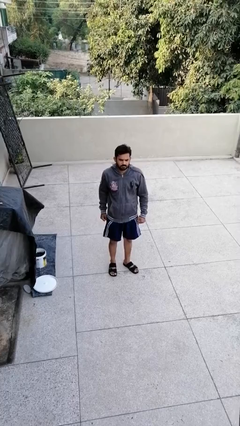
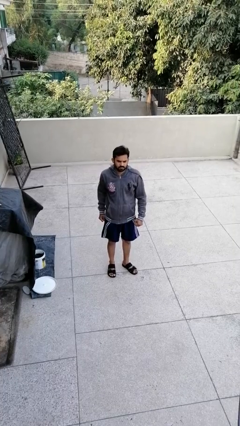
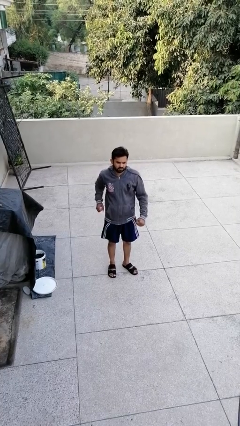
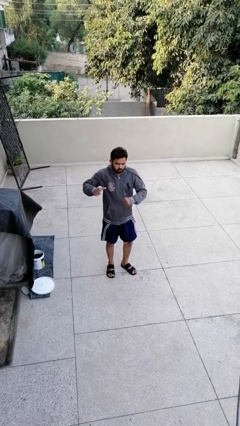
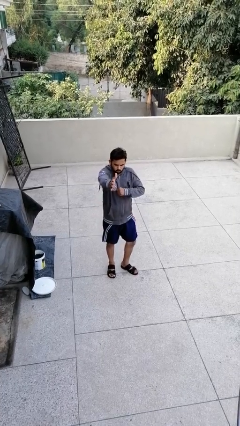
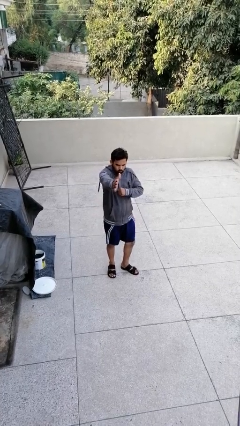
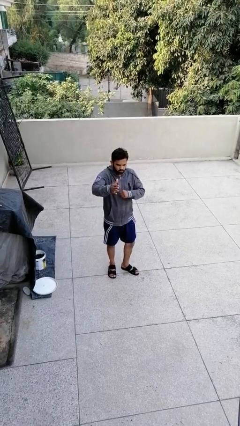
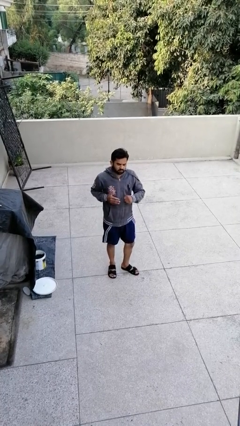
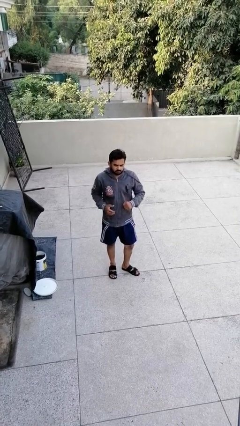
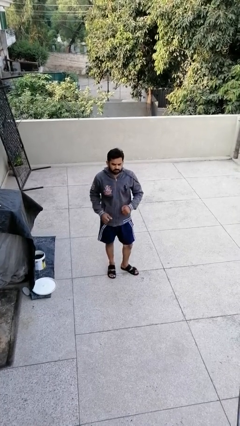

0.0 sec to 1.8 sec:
person karate chop

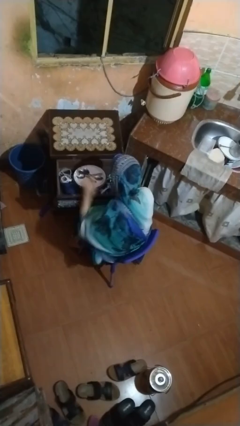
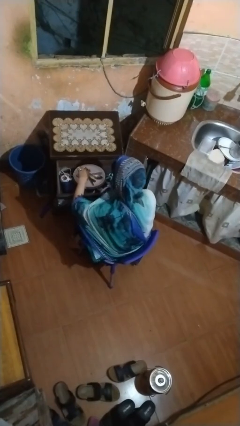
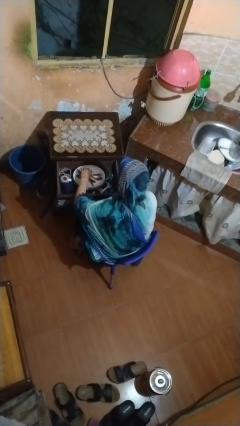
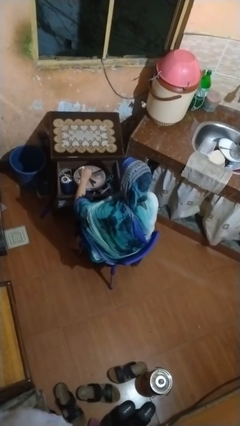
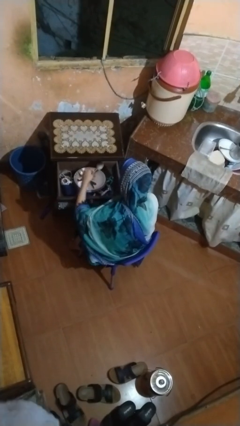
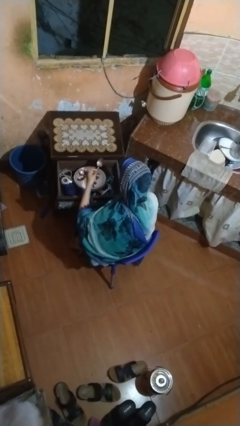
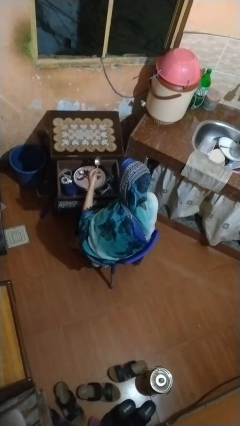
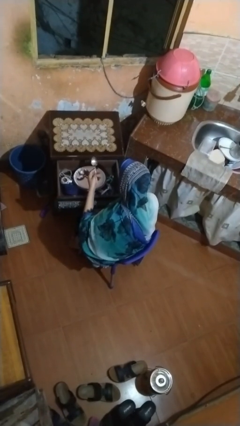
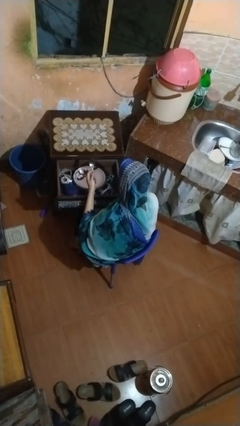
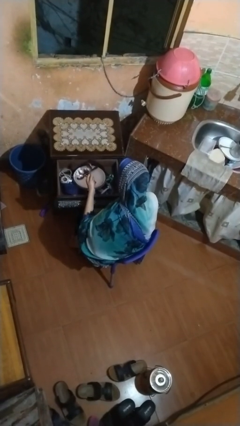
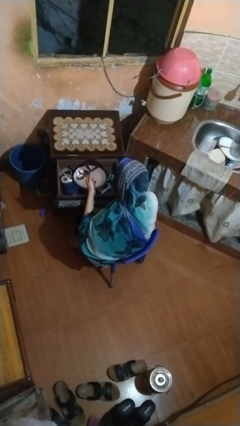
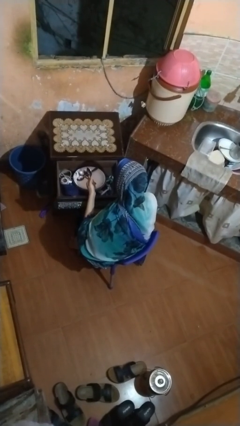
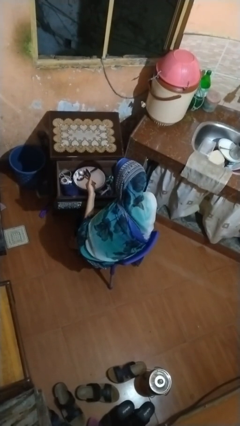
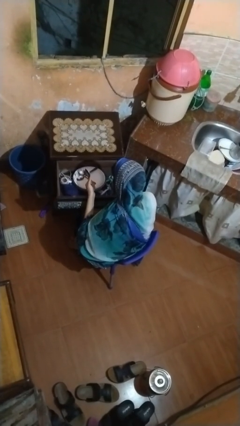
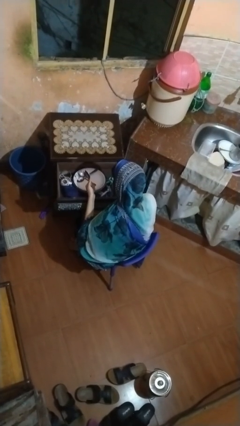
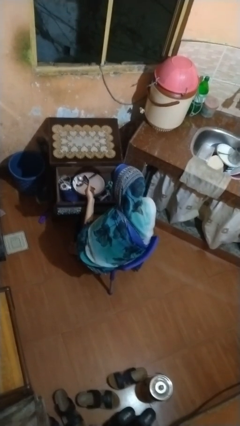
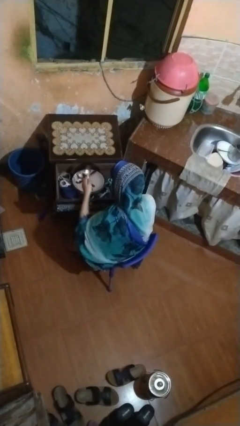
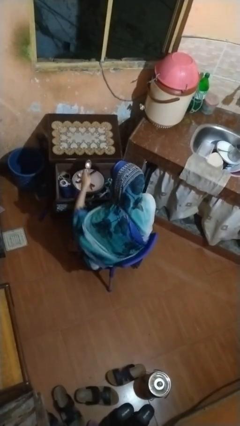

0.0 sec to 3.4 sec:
person takes object from kitchen drawer

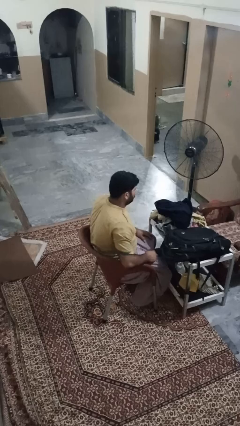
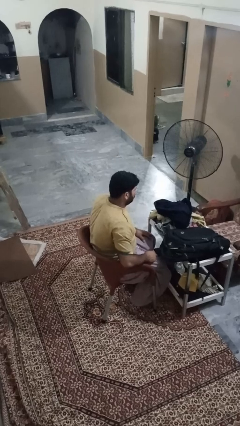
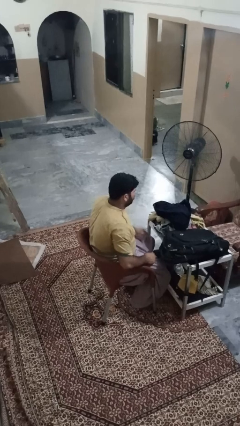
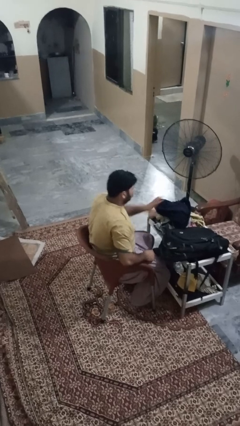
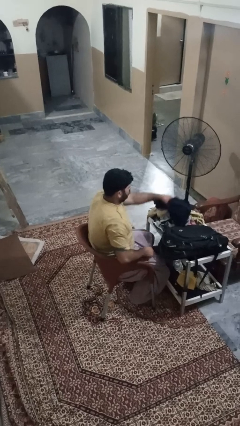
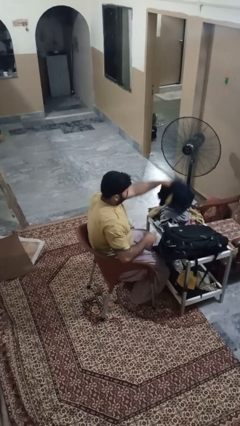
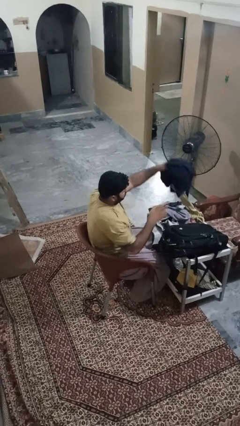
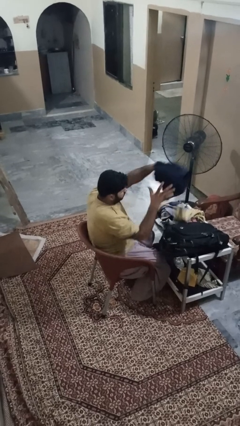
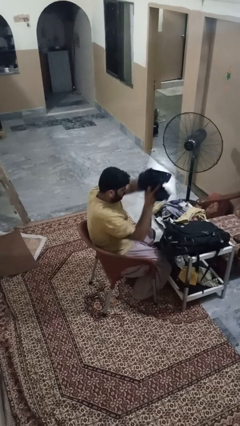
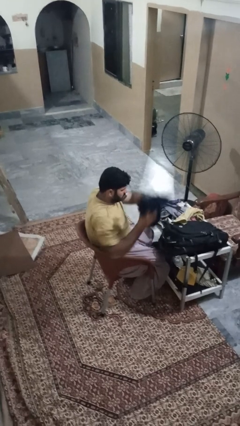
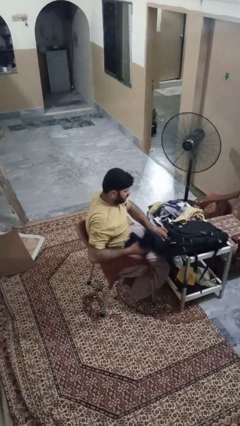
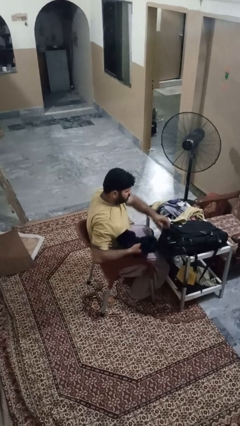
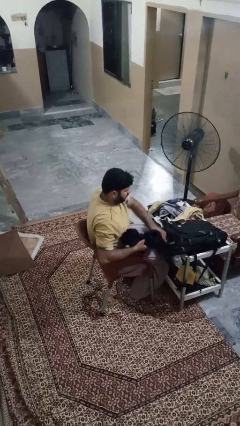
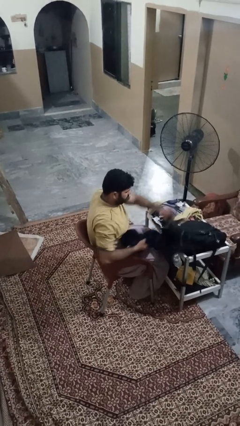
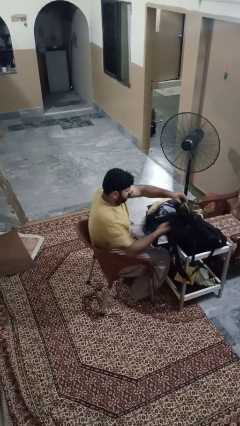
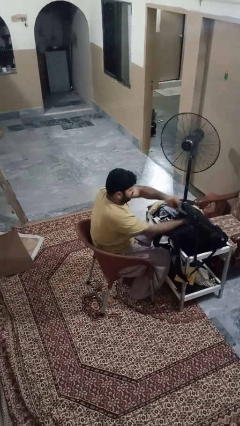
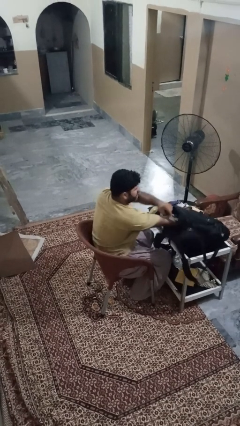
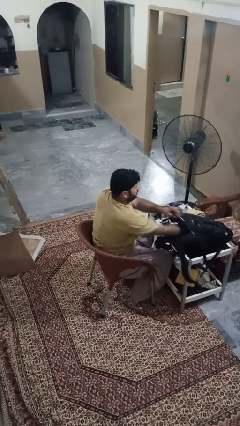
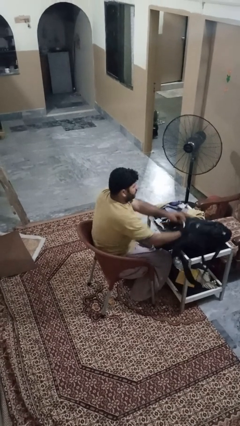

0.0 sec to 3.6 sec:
person loads clothes into suitcase

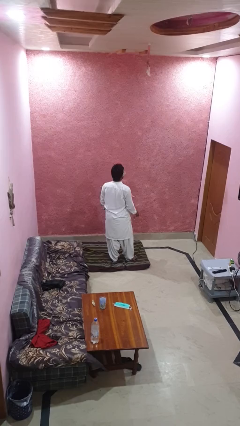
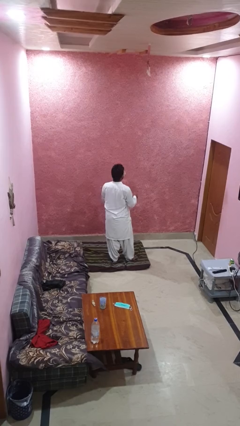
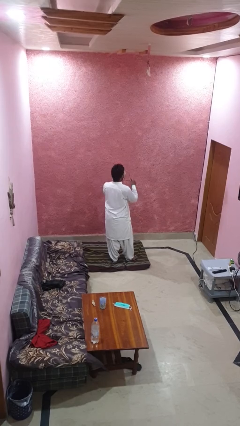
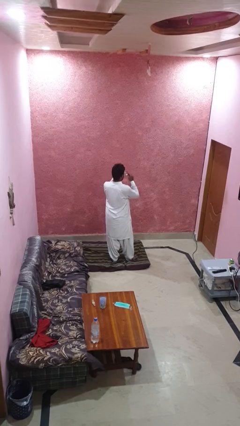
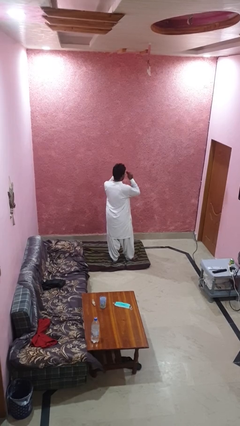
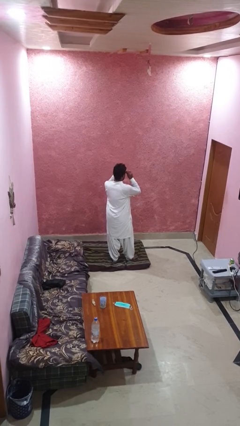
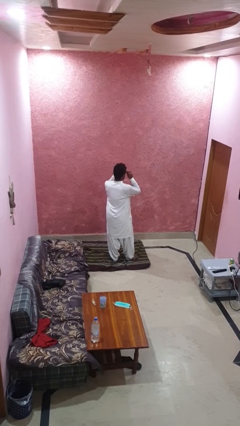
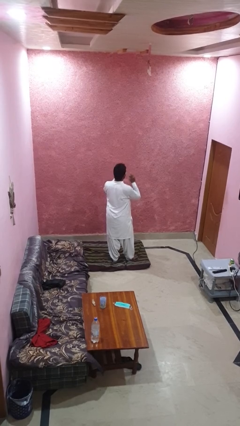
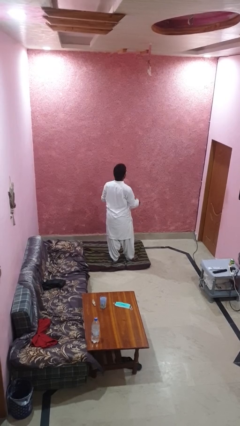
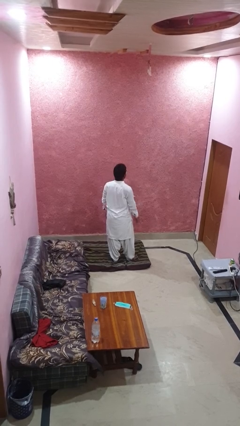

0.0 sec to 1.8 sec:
person puts on glasses

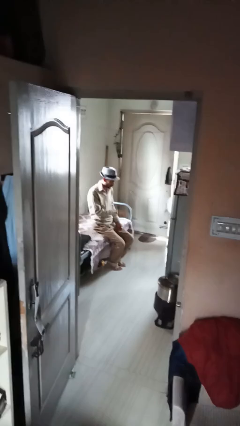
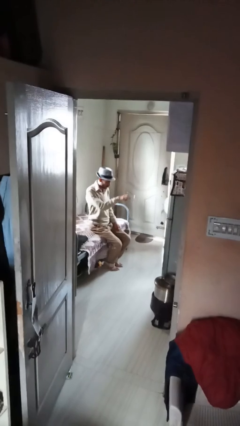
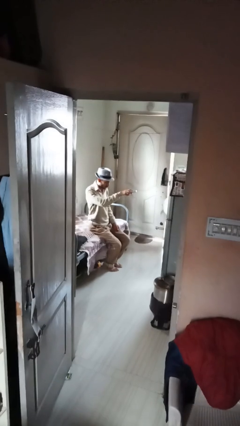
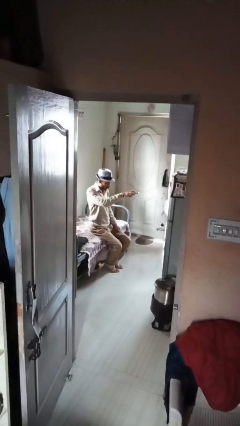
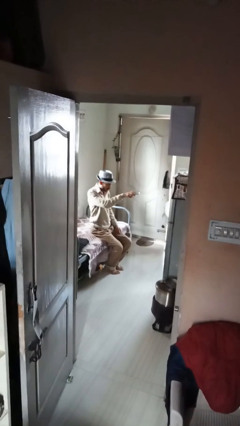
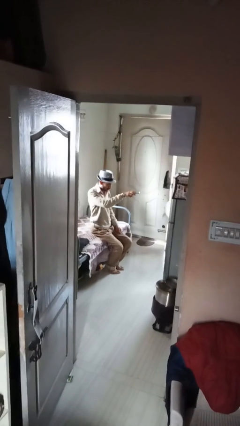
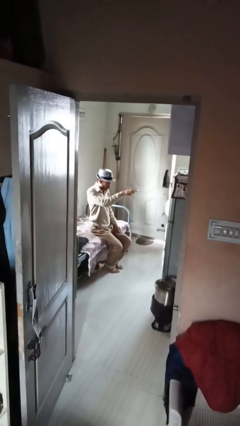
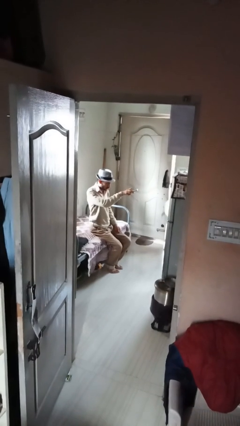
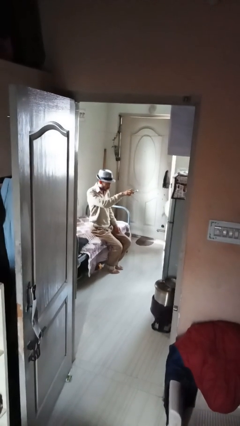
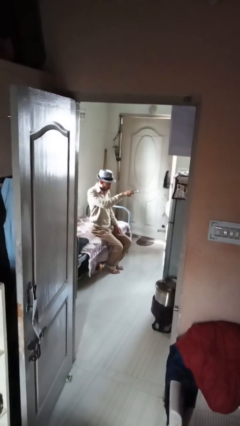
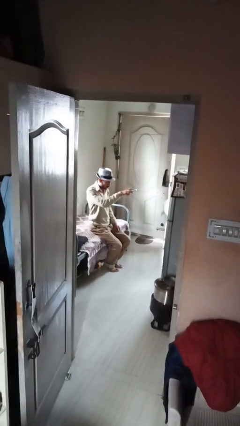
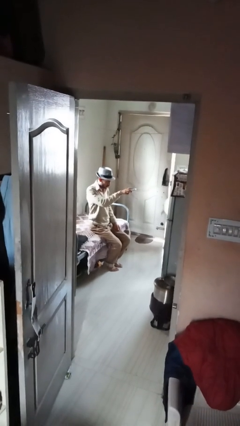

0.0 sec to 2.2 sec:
person uses television remote

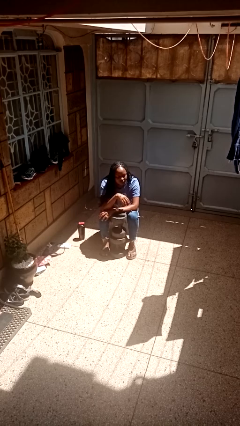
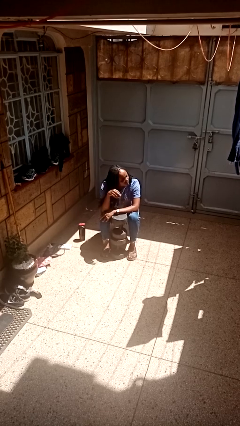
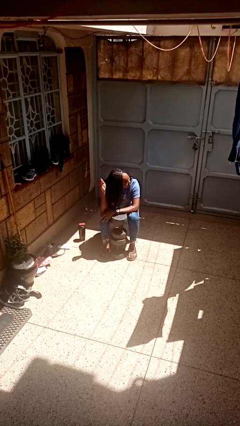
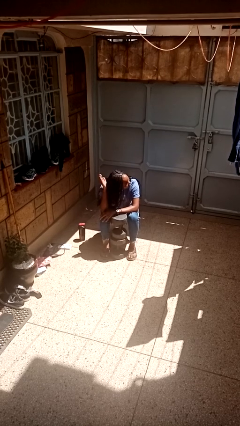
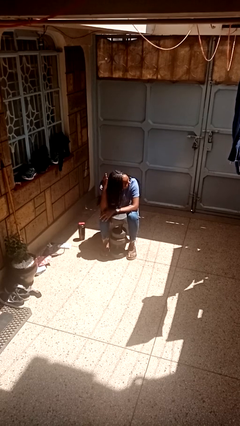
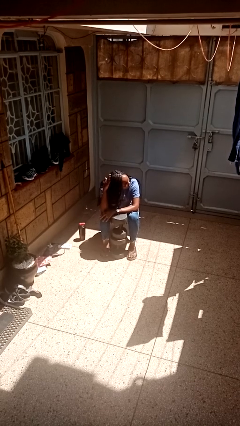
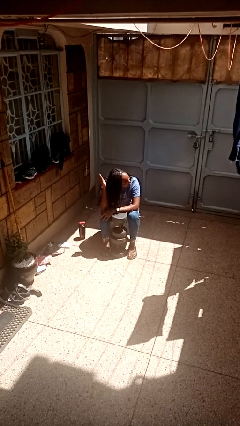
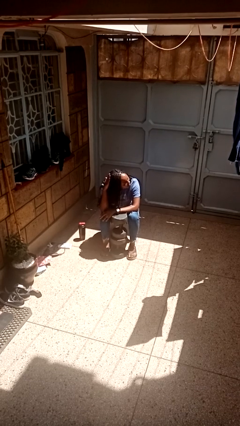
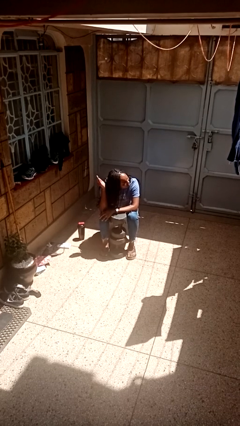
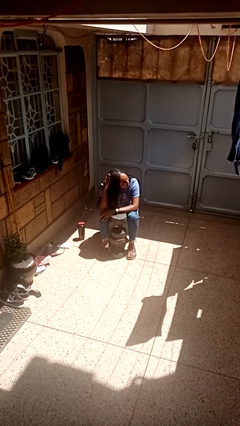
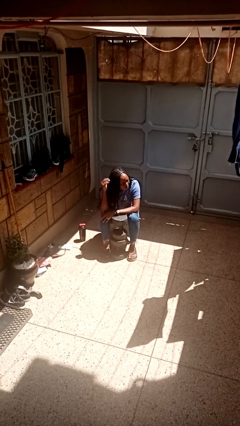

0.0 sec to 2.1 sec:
person pats head

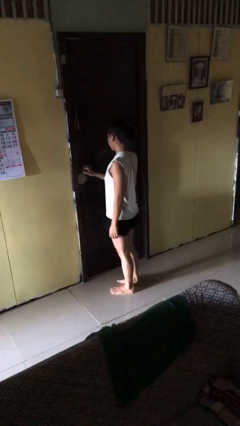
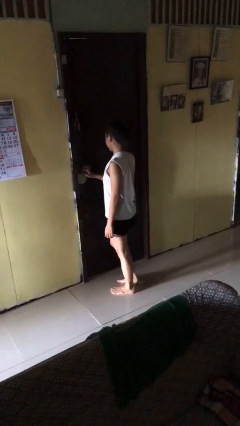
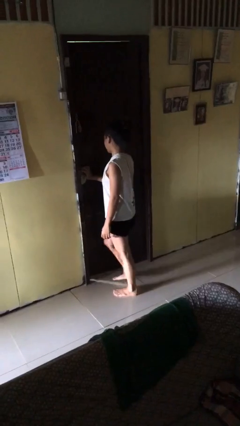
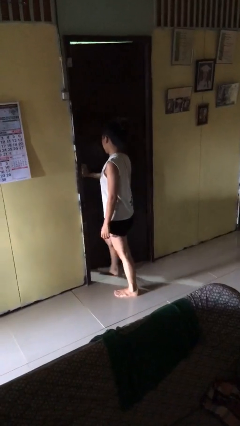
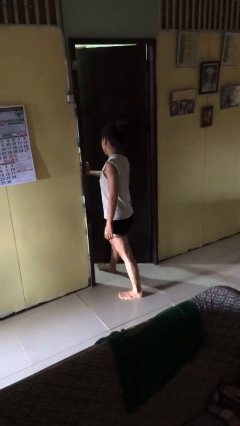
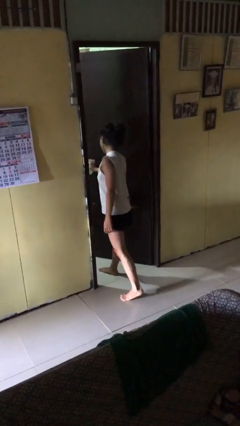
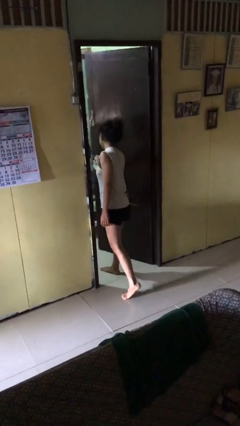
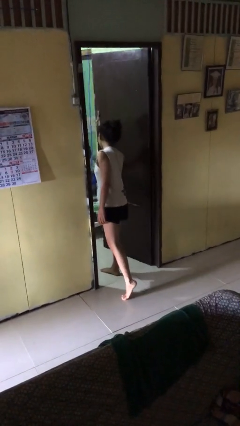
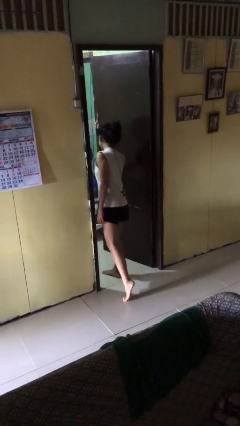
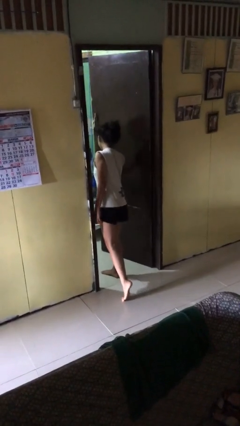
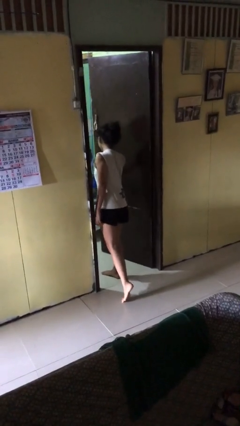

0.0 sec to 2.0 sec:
person opens facility door
